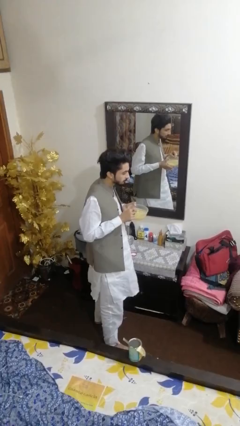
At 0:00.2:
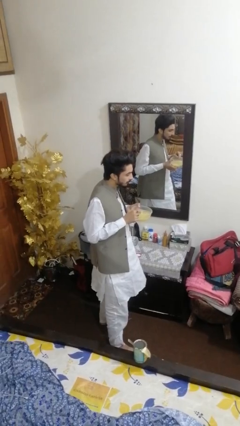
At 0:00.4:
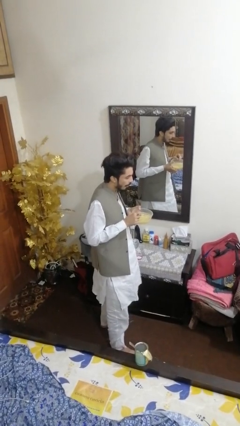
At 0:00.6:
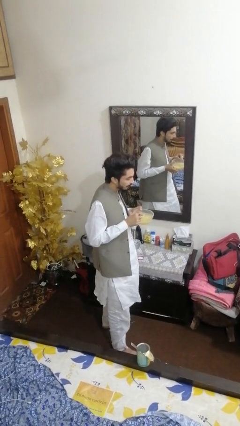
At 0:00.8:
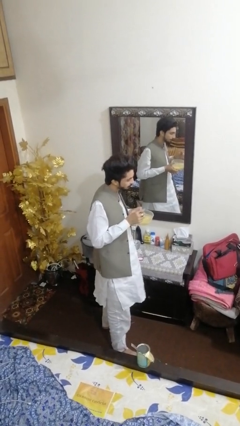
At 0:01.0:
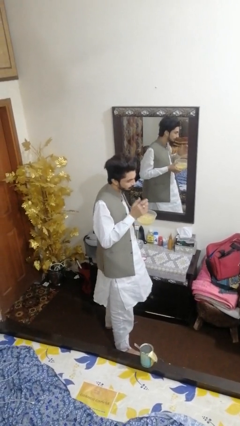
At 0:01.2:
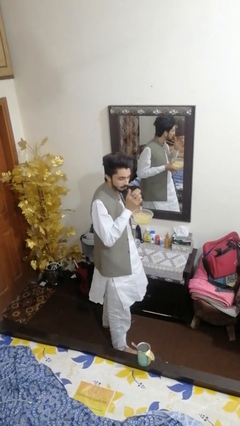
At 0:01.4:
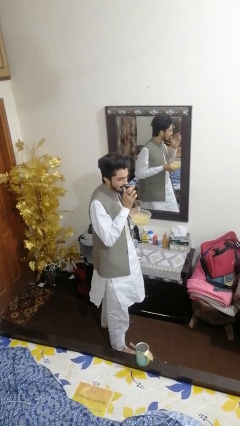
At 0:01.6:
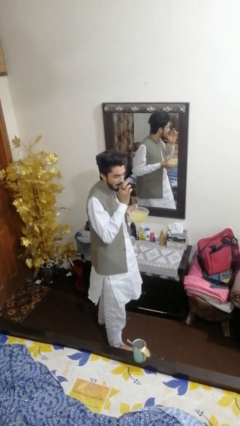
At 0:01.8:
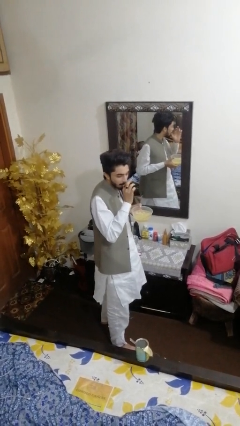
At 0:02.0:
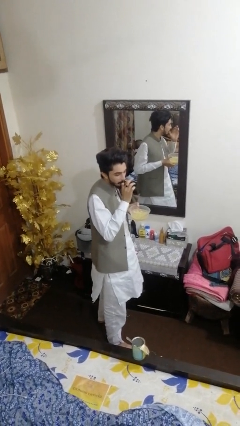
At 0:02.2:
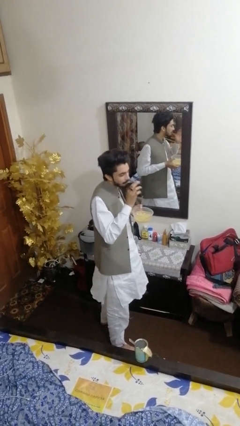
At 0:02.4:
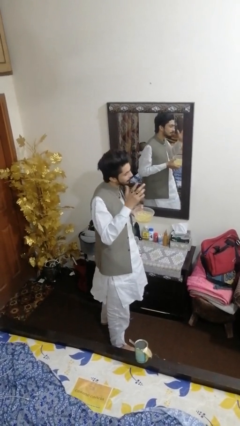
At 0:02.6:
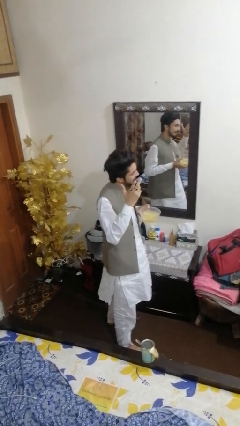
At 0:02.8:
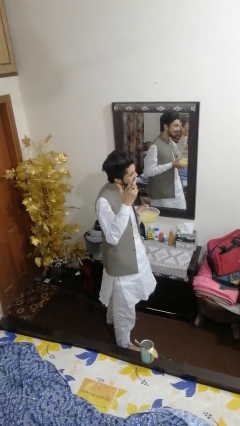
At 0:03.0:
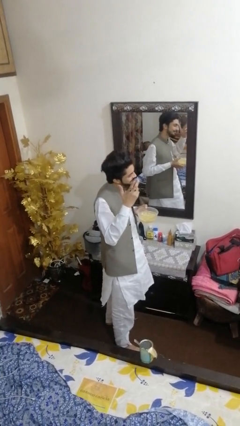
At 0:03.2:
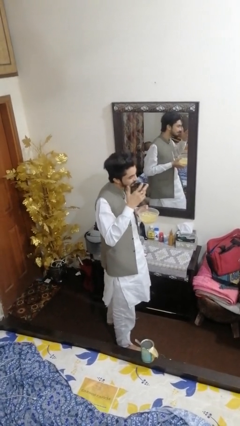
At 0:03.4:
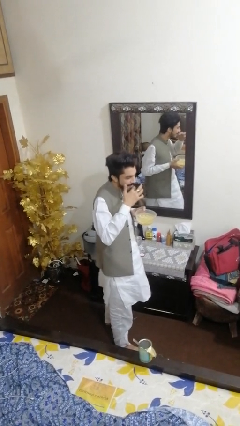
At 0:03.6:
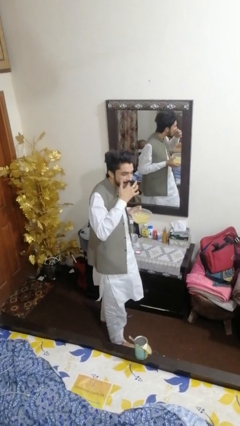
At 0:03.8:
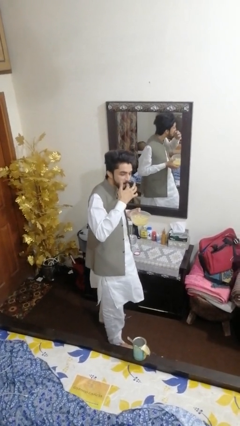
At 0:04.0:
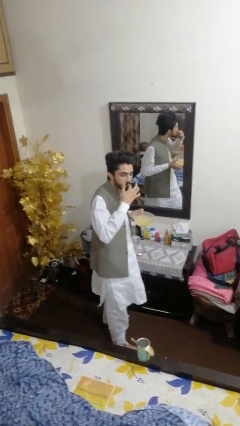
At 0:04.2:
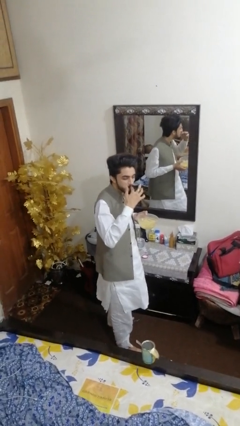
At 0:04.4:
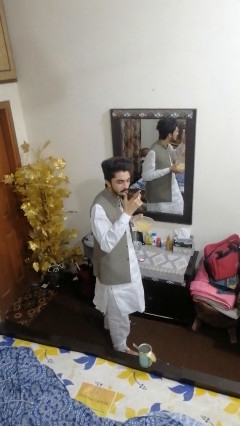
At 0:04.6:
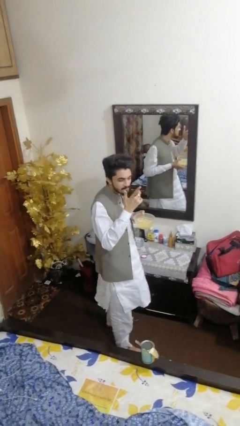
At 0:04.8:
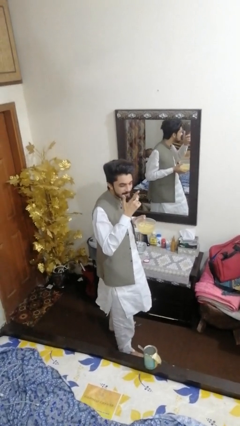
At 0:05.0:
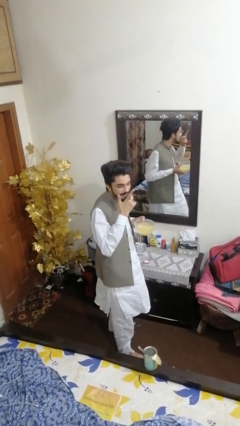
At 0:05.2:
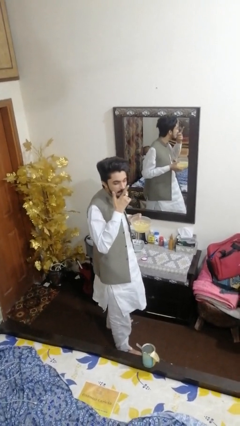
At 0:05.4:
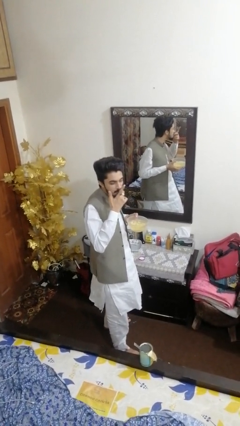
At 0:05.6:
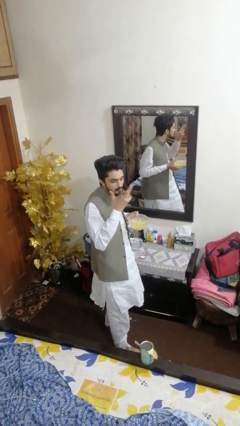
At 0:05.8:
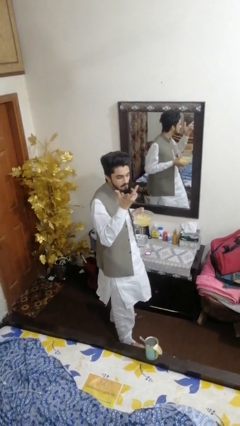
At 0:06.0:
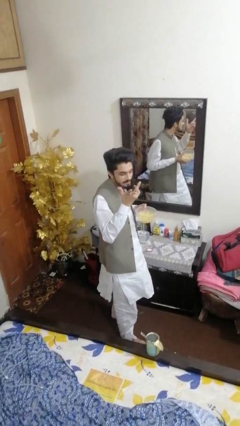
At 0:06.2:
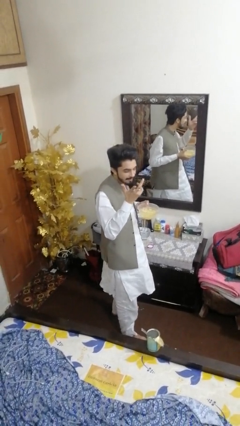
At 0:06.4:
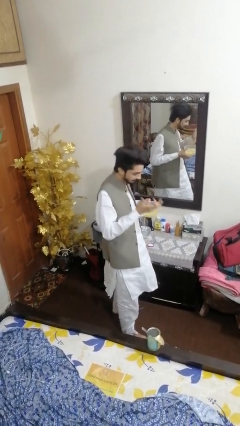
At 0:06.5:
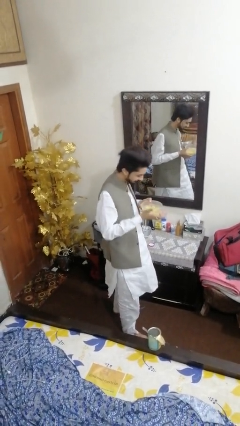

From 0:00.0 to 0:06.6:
person licks fingers

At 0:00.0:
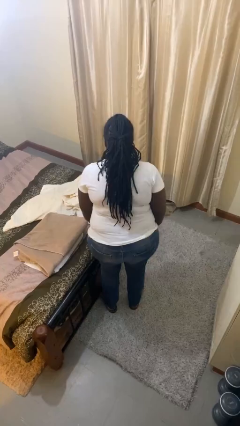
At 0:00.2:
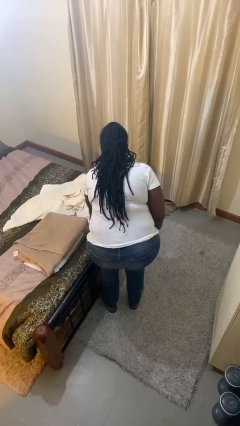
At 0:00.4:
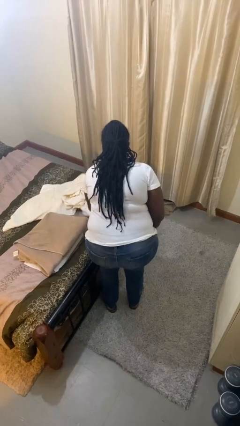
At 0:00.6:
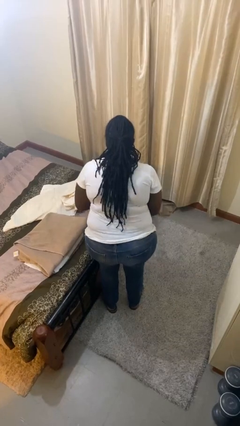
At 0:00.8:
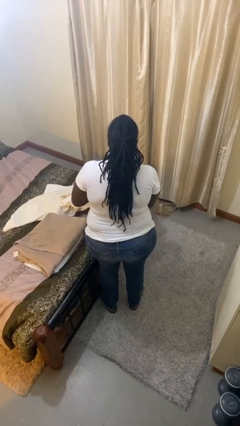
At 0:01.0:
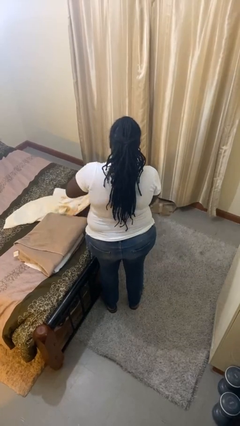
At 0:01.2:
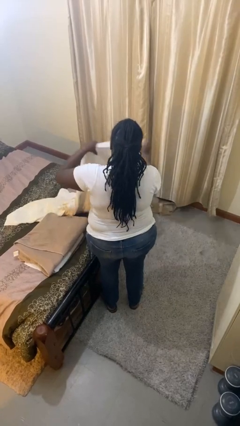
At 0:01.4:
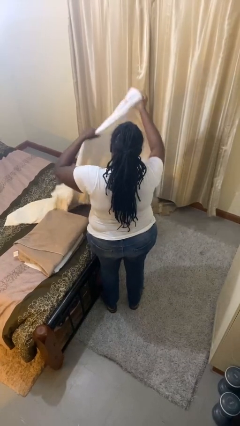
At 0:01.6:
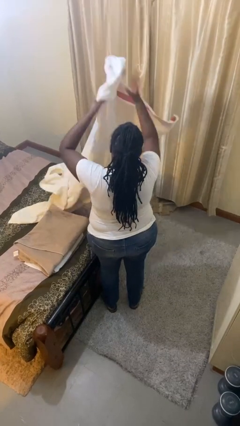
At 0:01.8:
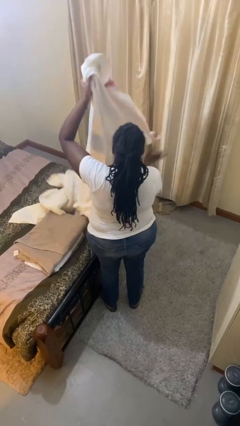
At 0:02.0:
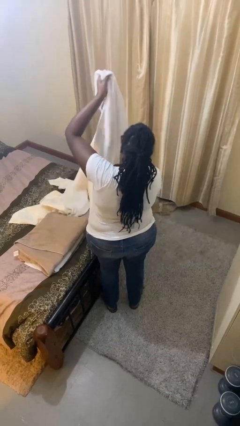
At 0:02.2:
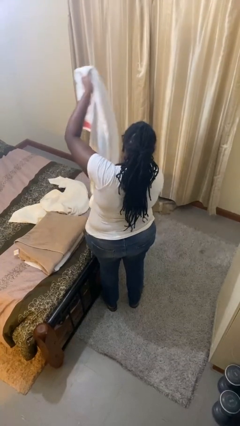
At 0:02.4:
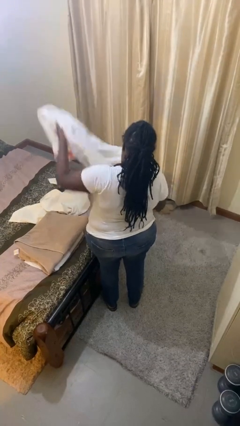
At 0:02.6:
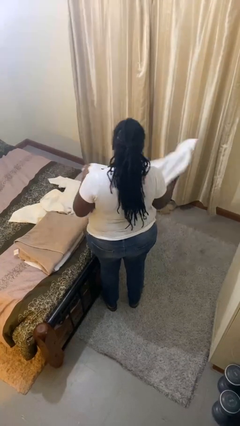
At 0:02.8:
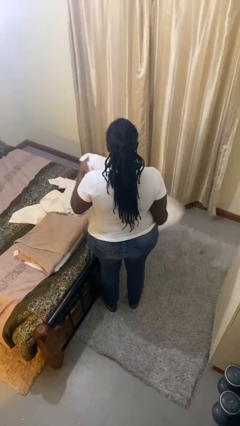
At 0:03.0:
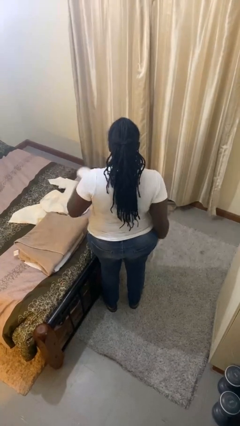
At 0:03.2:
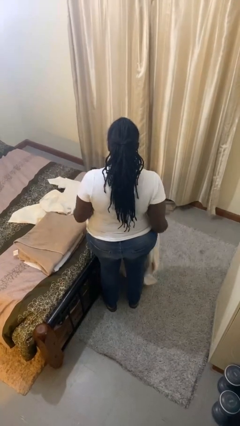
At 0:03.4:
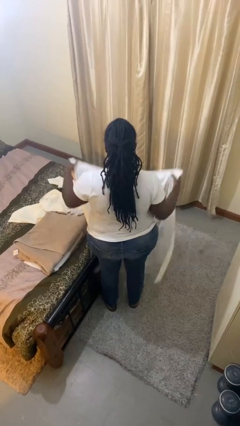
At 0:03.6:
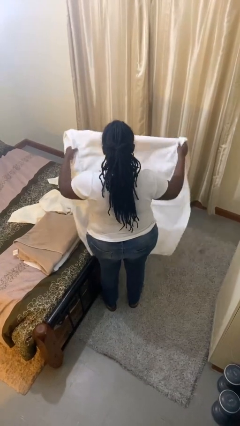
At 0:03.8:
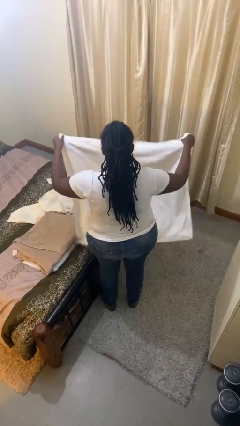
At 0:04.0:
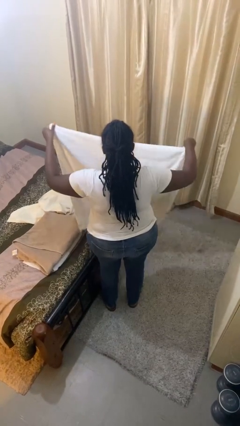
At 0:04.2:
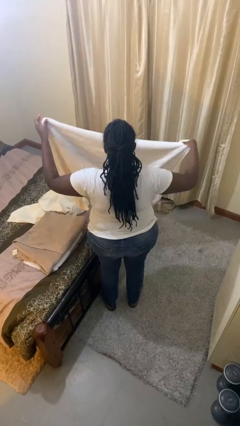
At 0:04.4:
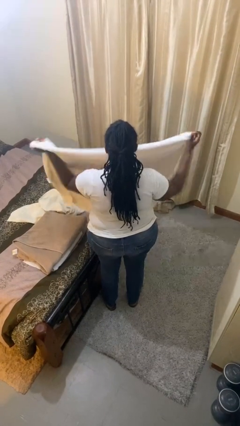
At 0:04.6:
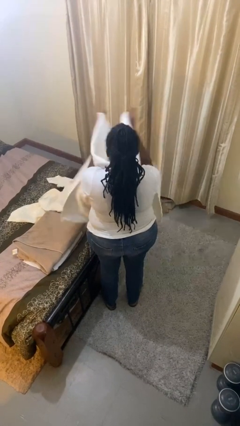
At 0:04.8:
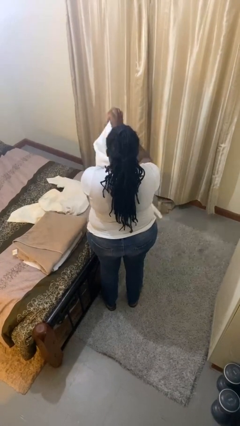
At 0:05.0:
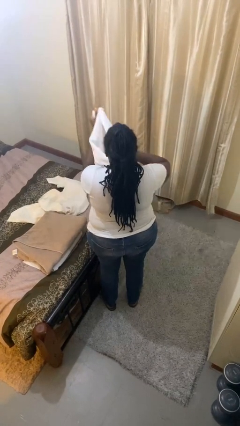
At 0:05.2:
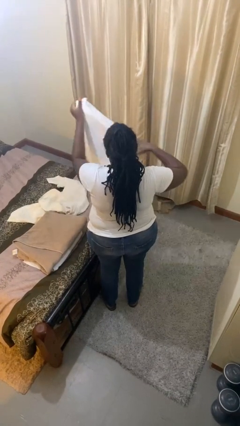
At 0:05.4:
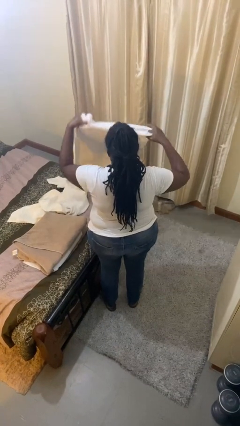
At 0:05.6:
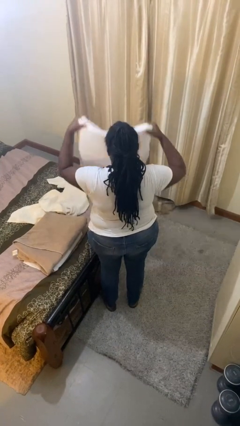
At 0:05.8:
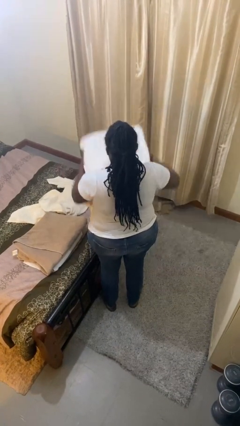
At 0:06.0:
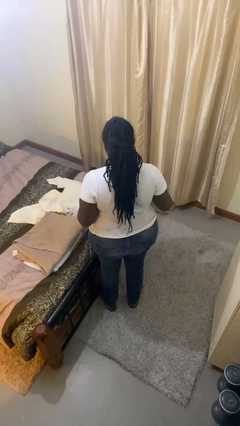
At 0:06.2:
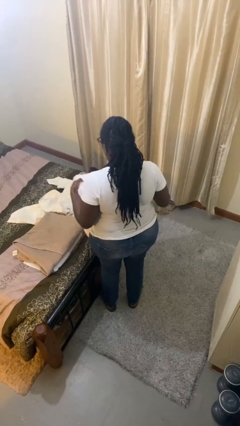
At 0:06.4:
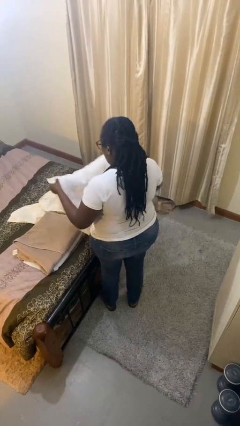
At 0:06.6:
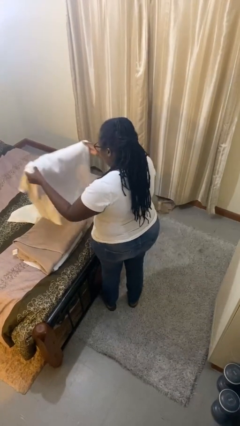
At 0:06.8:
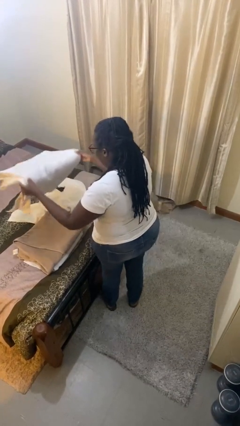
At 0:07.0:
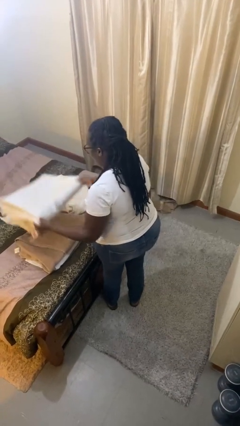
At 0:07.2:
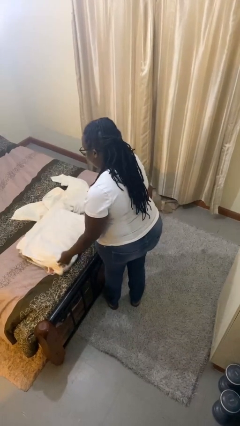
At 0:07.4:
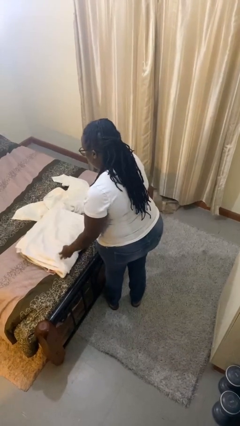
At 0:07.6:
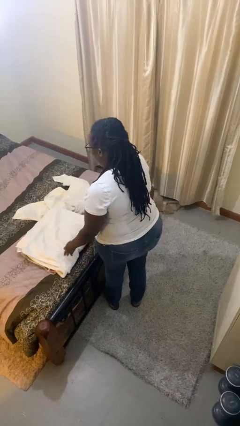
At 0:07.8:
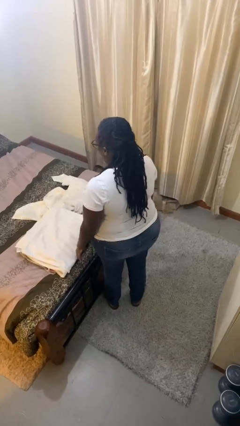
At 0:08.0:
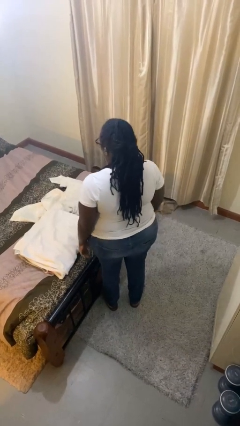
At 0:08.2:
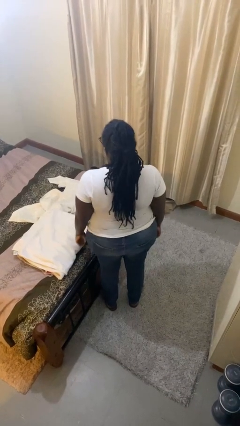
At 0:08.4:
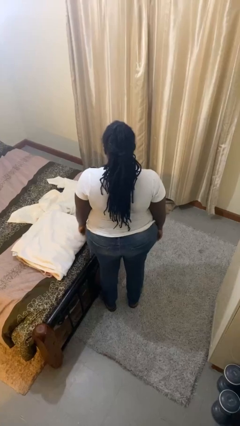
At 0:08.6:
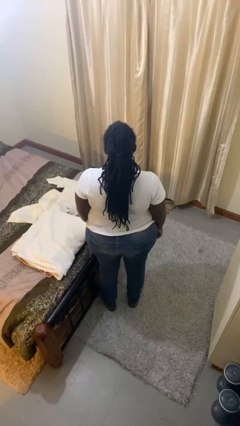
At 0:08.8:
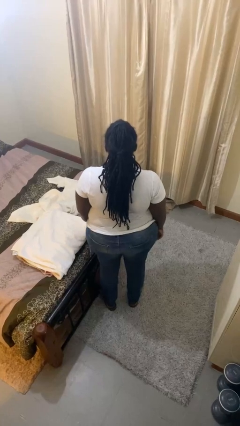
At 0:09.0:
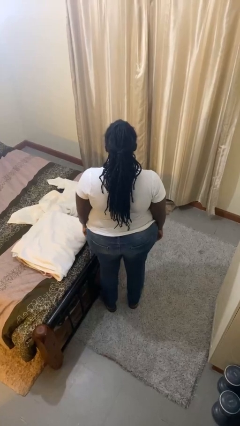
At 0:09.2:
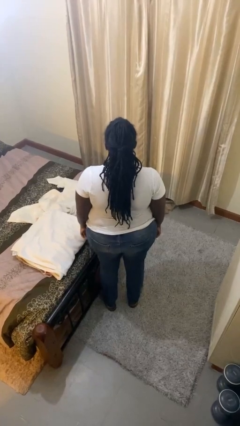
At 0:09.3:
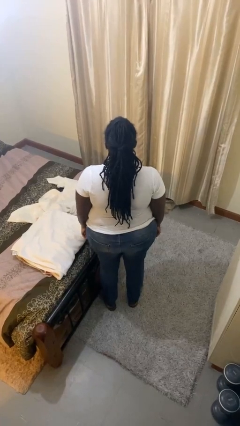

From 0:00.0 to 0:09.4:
person folds towel

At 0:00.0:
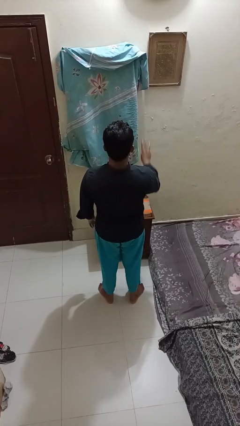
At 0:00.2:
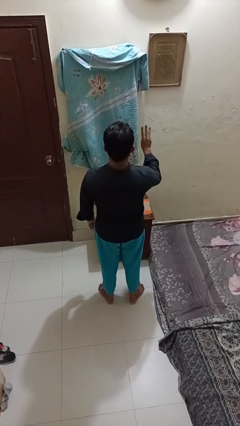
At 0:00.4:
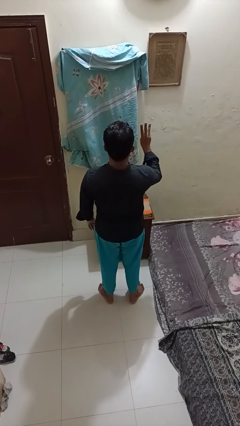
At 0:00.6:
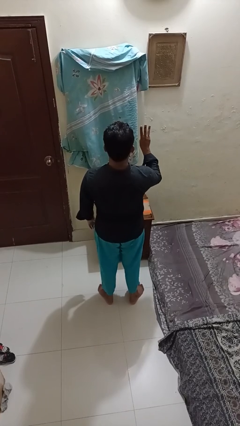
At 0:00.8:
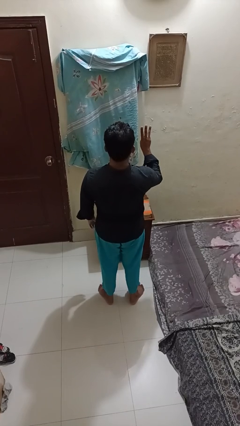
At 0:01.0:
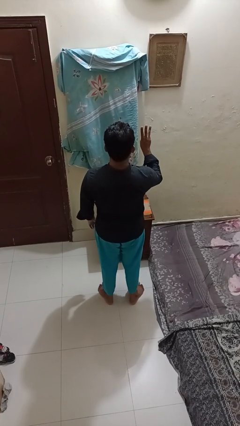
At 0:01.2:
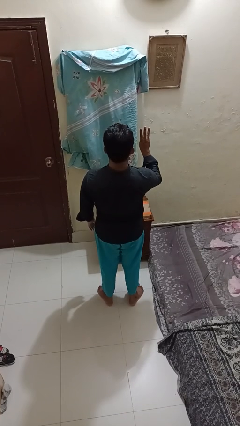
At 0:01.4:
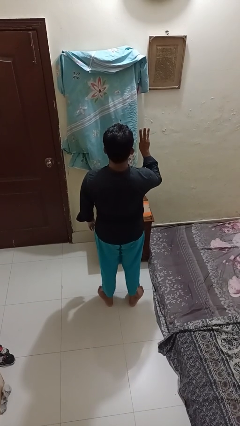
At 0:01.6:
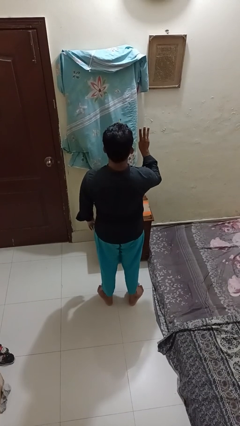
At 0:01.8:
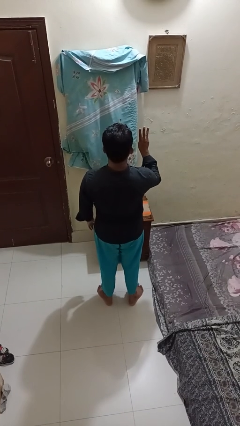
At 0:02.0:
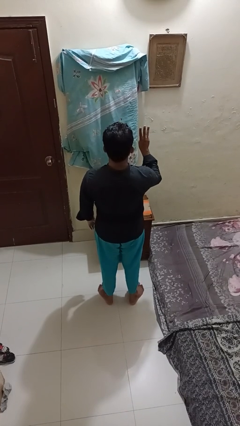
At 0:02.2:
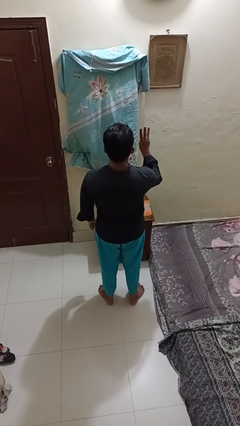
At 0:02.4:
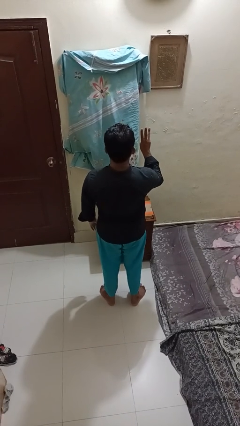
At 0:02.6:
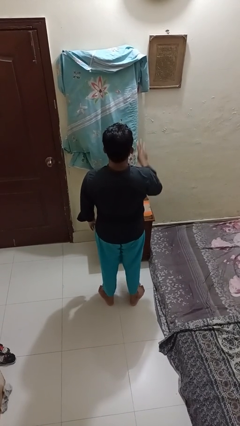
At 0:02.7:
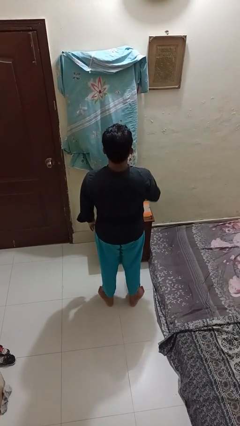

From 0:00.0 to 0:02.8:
person gestures number three
